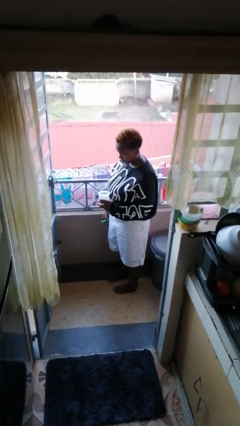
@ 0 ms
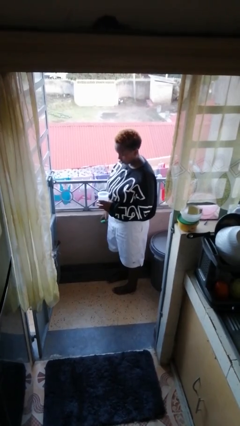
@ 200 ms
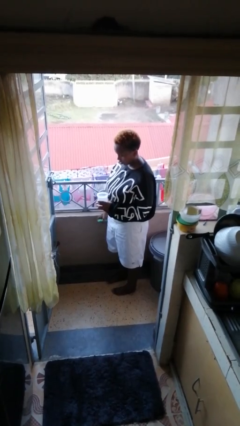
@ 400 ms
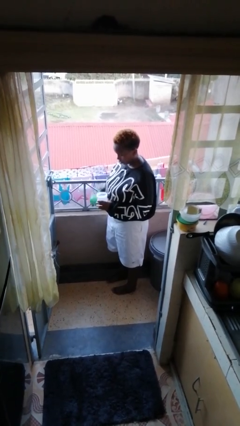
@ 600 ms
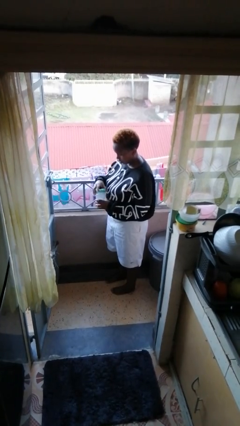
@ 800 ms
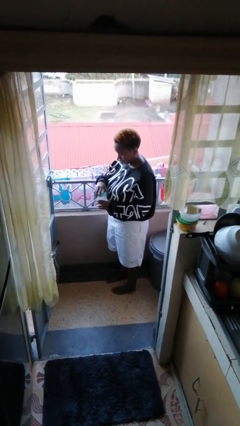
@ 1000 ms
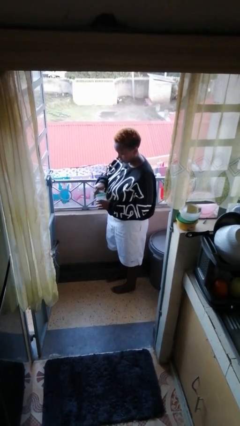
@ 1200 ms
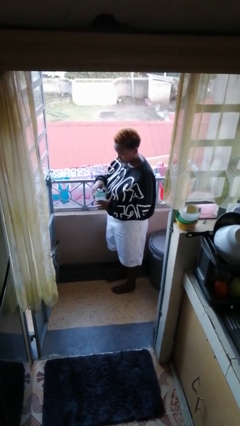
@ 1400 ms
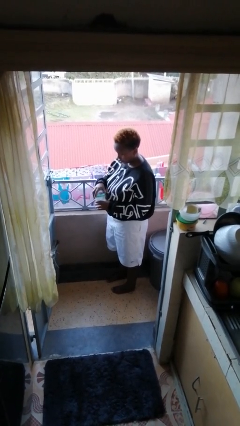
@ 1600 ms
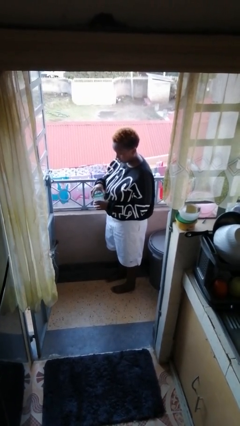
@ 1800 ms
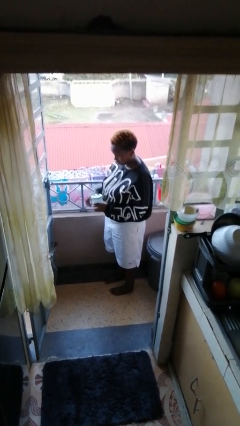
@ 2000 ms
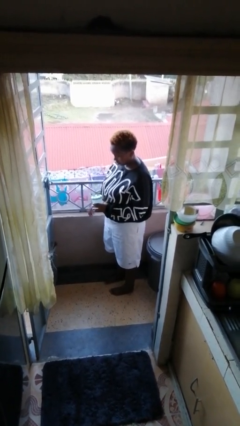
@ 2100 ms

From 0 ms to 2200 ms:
person closes jar

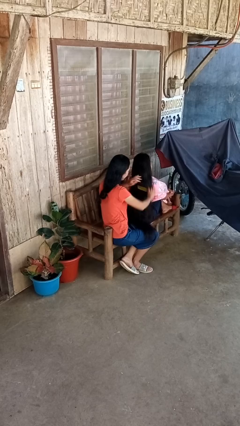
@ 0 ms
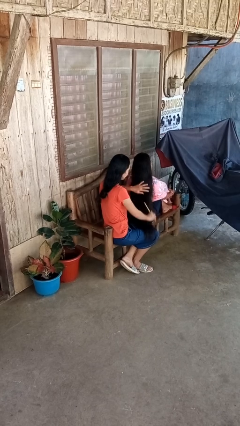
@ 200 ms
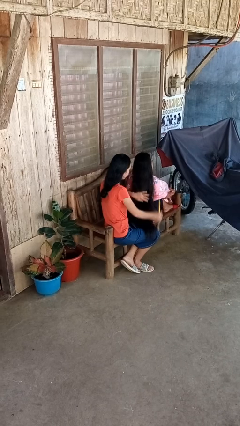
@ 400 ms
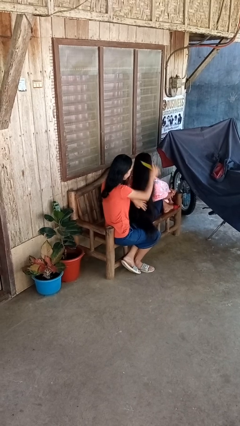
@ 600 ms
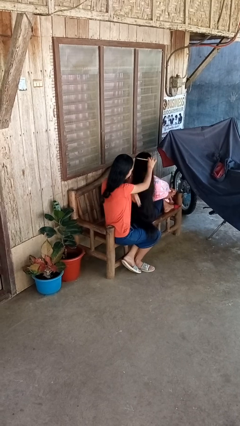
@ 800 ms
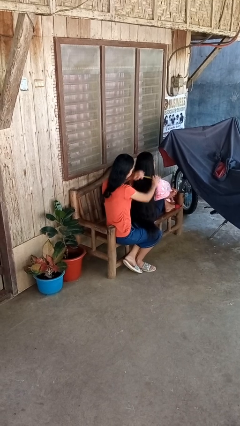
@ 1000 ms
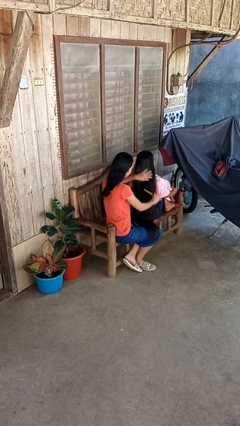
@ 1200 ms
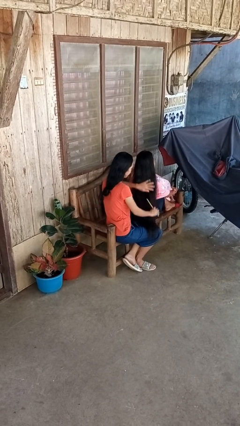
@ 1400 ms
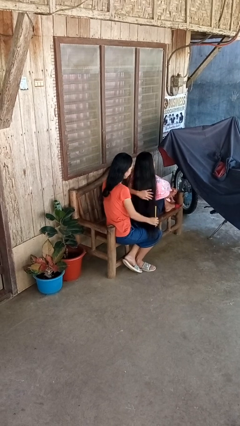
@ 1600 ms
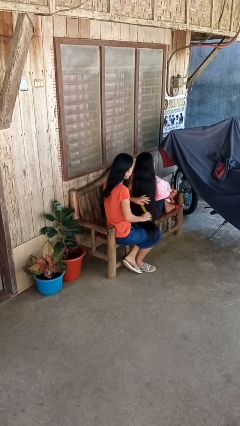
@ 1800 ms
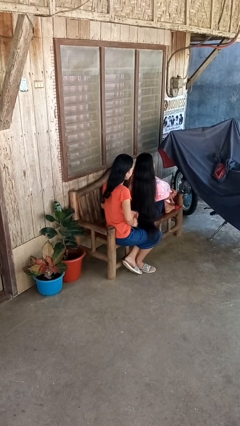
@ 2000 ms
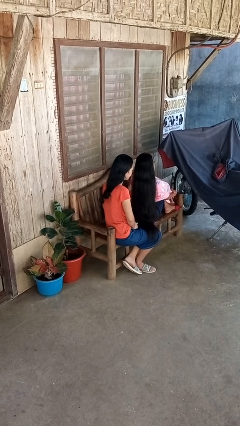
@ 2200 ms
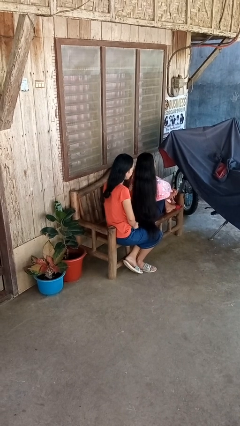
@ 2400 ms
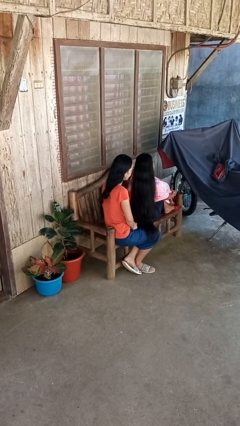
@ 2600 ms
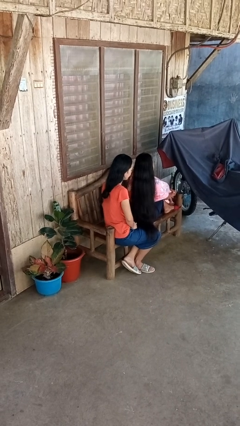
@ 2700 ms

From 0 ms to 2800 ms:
person brushes hair of person

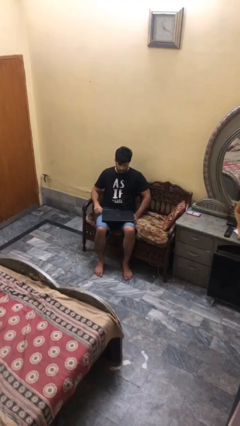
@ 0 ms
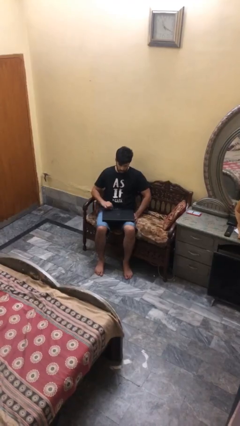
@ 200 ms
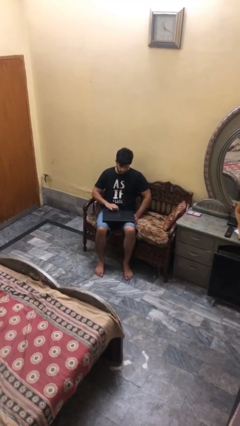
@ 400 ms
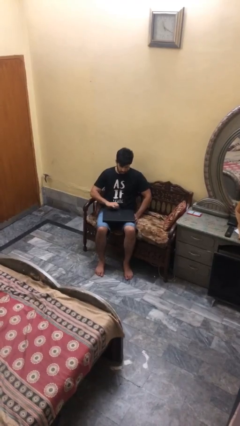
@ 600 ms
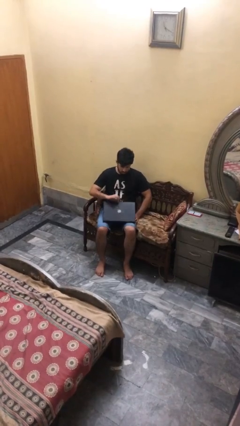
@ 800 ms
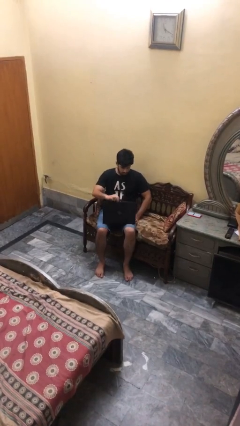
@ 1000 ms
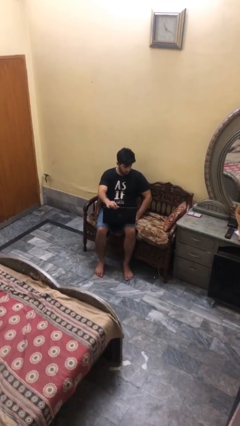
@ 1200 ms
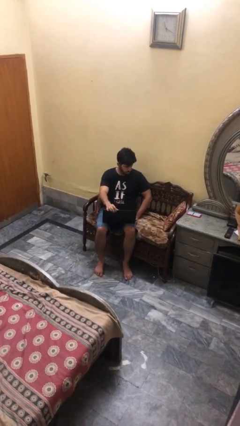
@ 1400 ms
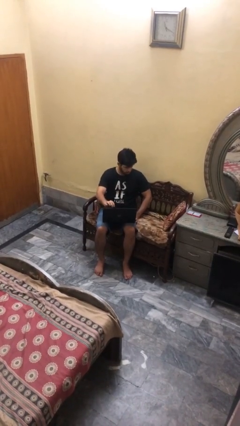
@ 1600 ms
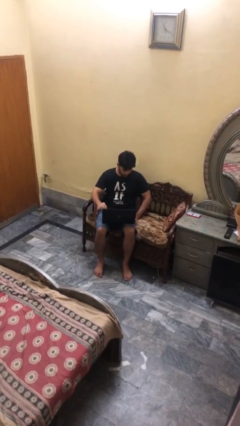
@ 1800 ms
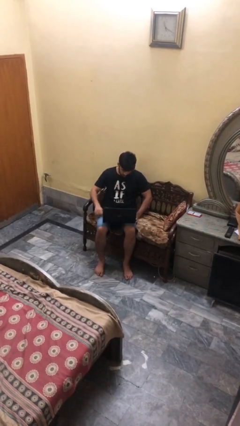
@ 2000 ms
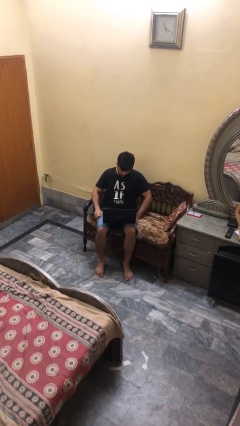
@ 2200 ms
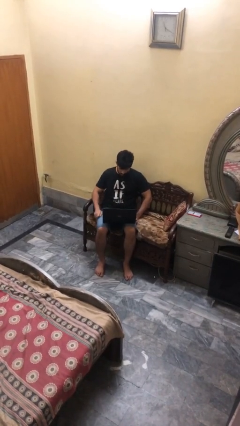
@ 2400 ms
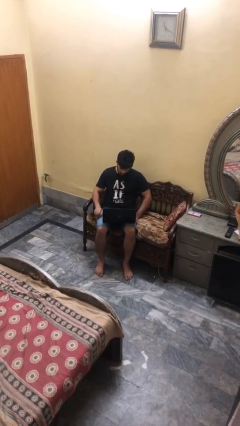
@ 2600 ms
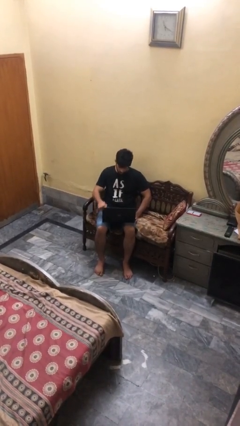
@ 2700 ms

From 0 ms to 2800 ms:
person opens laptop

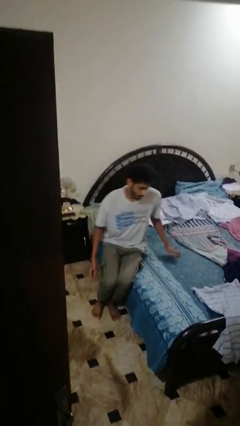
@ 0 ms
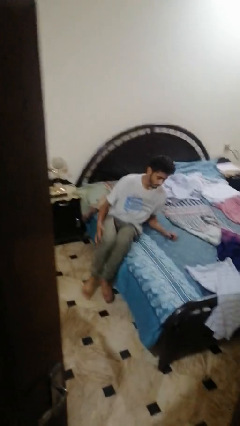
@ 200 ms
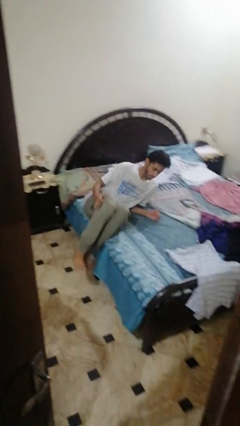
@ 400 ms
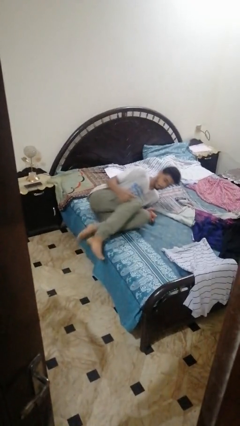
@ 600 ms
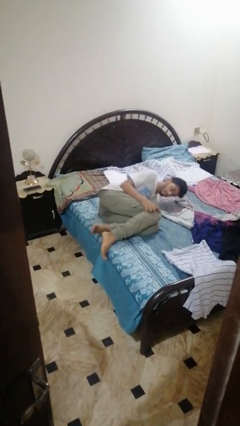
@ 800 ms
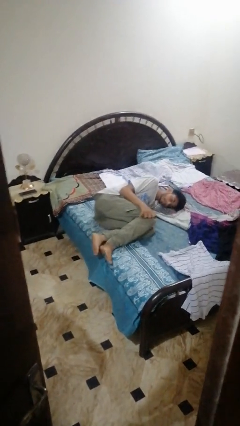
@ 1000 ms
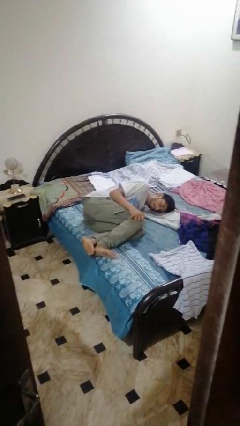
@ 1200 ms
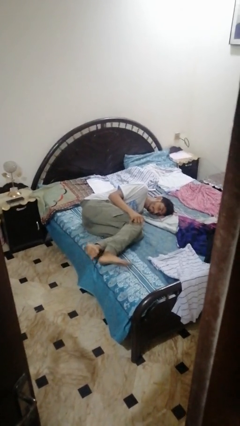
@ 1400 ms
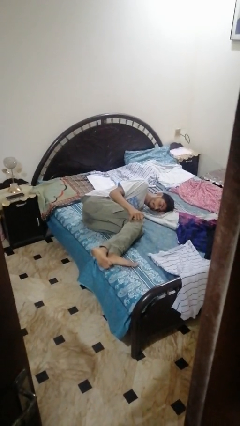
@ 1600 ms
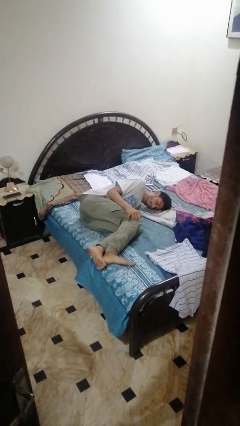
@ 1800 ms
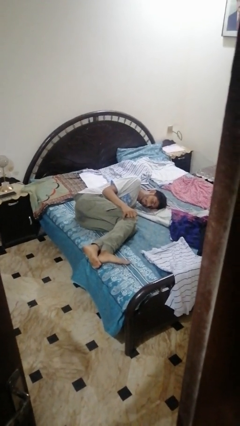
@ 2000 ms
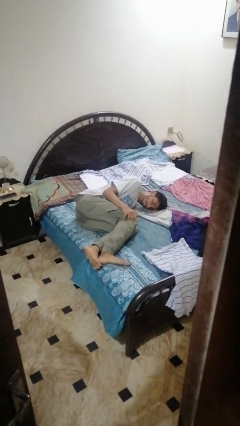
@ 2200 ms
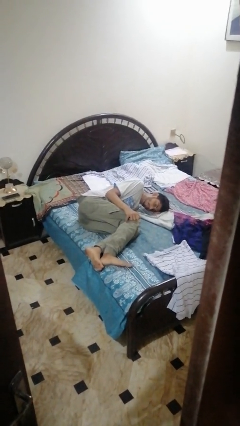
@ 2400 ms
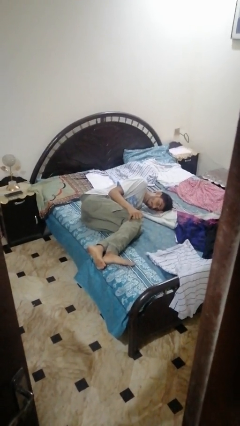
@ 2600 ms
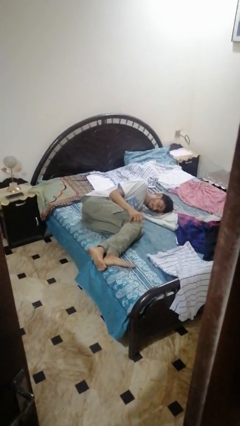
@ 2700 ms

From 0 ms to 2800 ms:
person lies down on bed

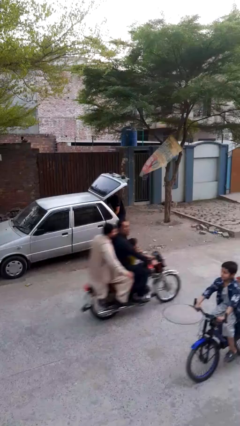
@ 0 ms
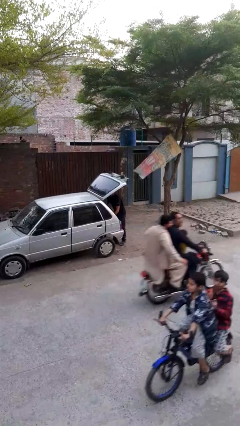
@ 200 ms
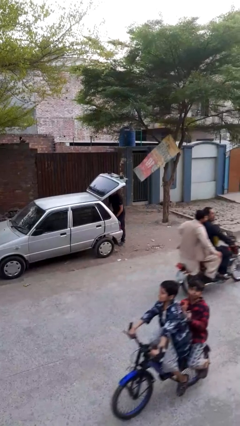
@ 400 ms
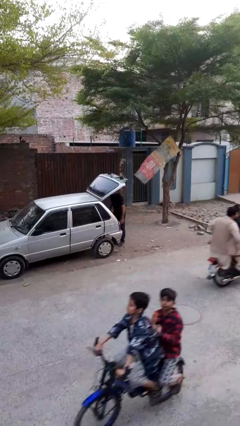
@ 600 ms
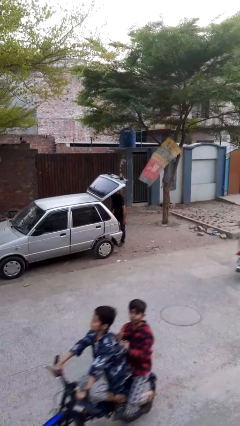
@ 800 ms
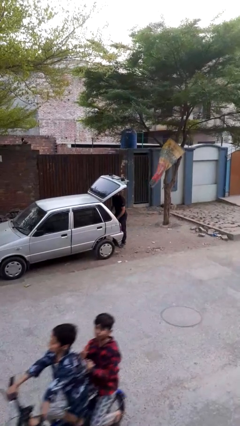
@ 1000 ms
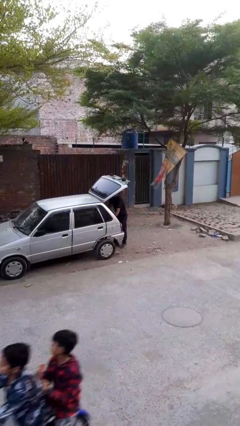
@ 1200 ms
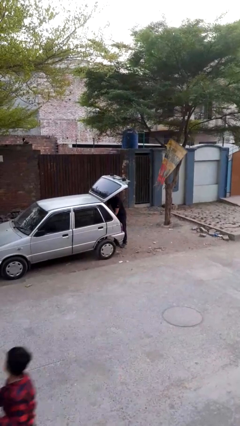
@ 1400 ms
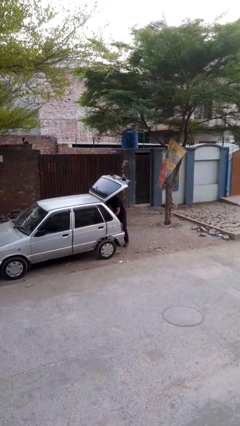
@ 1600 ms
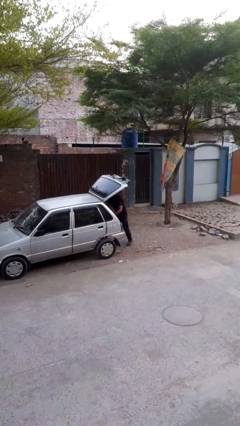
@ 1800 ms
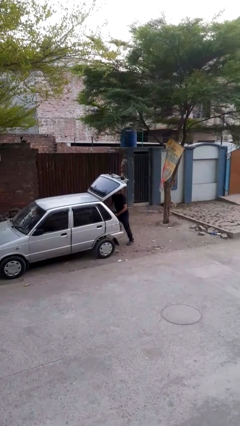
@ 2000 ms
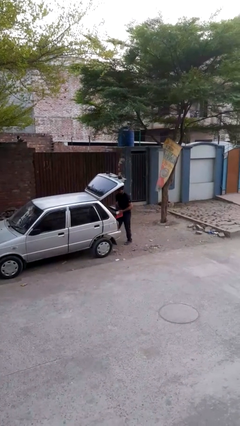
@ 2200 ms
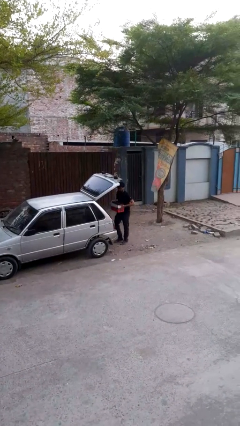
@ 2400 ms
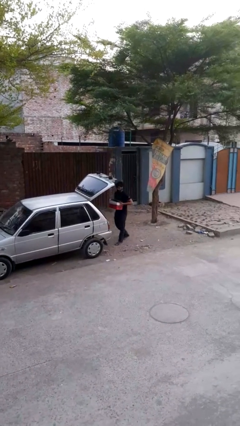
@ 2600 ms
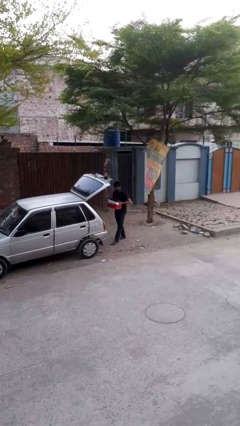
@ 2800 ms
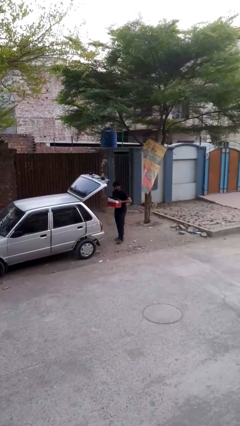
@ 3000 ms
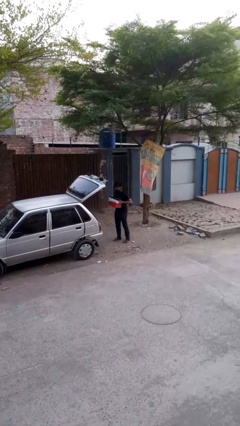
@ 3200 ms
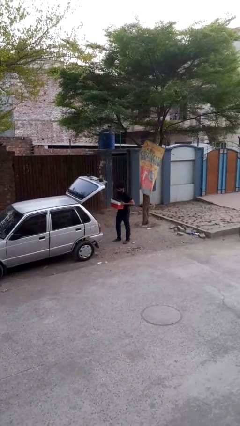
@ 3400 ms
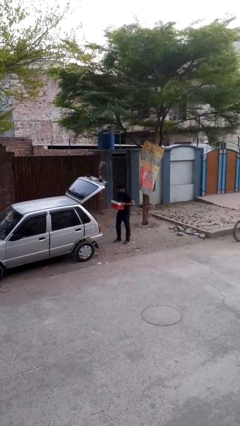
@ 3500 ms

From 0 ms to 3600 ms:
person unloads car

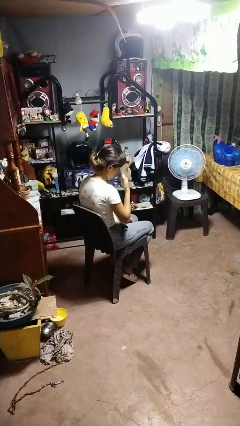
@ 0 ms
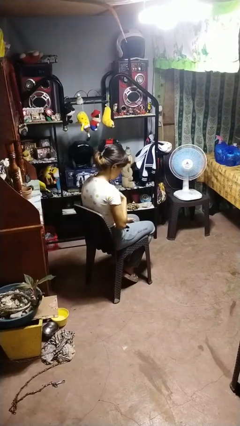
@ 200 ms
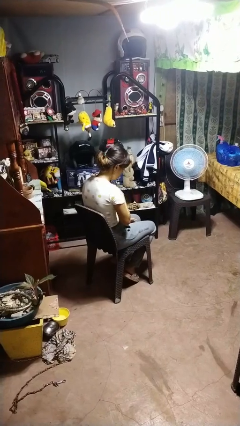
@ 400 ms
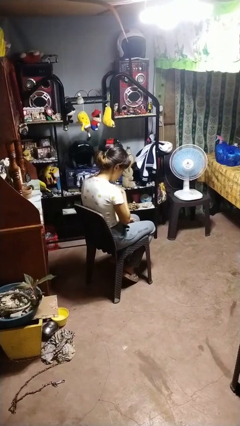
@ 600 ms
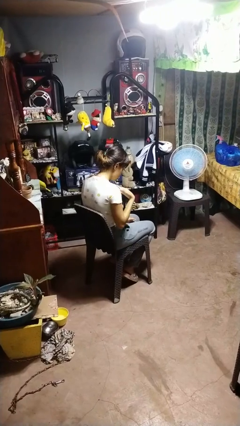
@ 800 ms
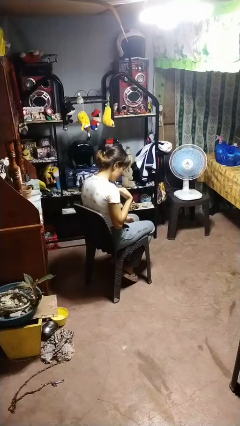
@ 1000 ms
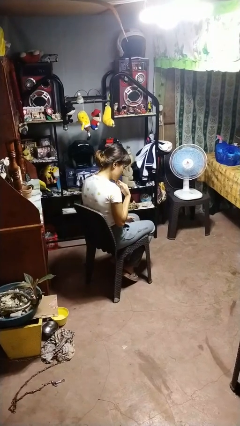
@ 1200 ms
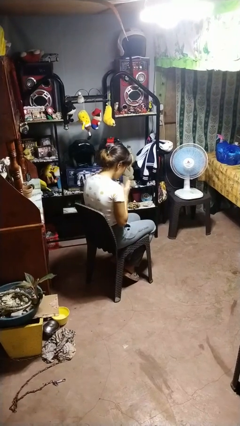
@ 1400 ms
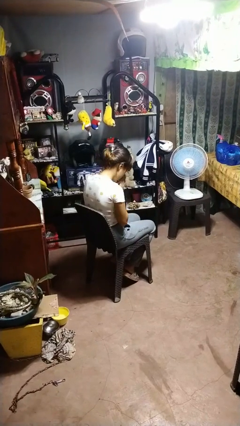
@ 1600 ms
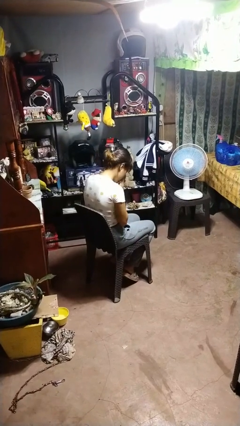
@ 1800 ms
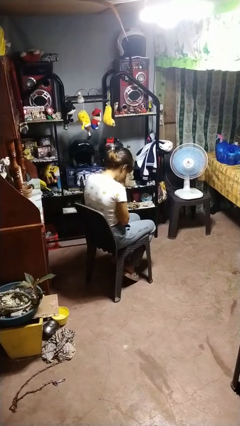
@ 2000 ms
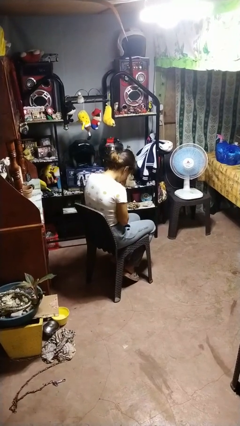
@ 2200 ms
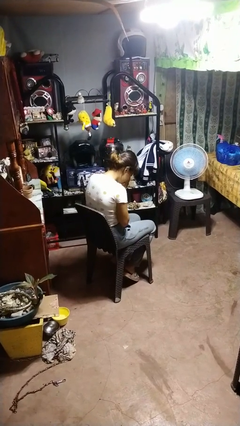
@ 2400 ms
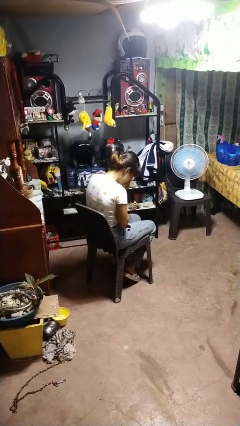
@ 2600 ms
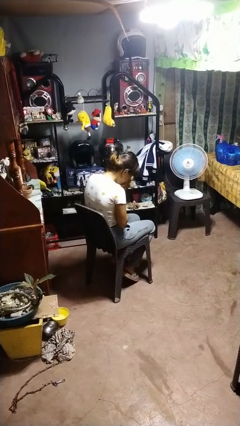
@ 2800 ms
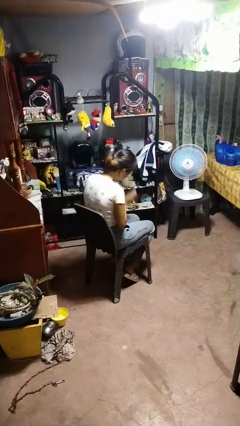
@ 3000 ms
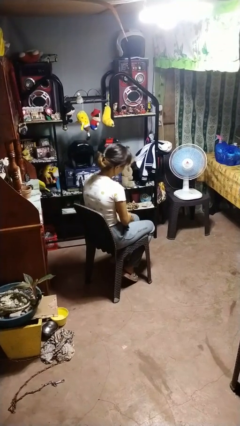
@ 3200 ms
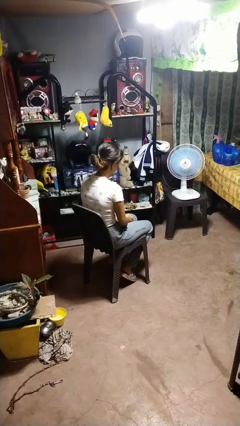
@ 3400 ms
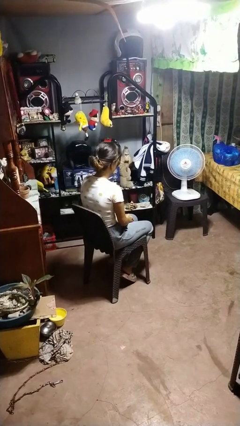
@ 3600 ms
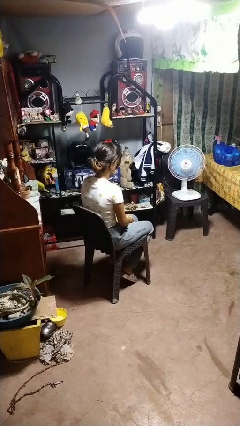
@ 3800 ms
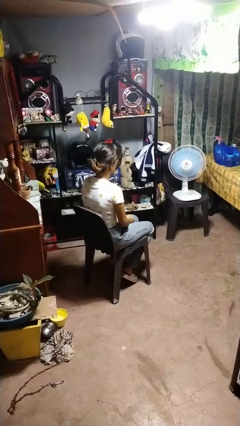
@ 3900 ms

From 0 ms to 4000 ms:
person prays
